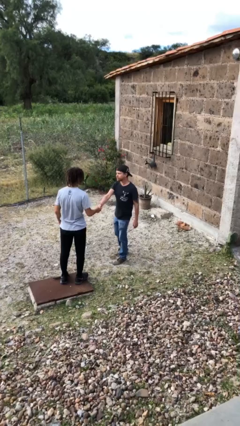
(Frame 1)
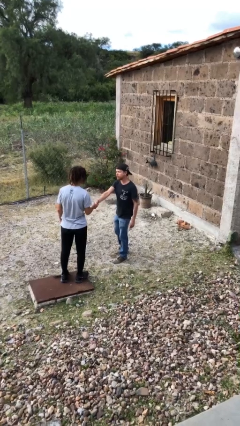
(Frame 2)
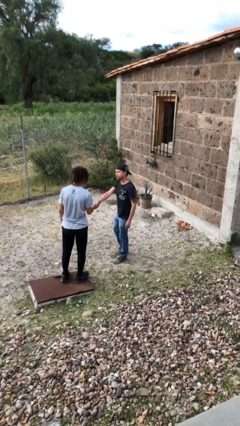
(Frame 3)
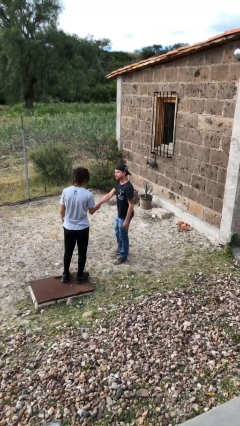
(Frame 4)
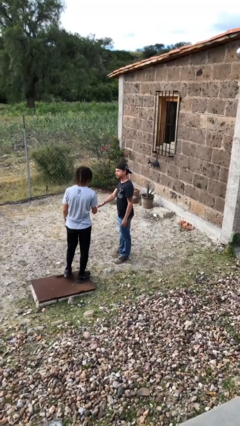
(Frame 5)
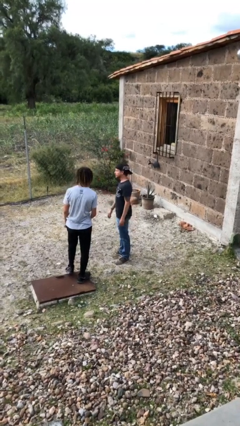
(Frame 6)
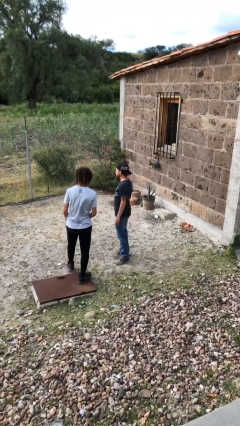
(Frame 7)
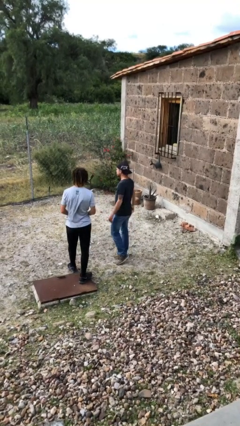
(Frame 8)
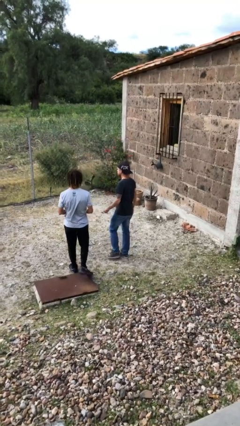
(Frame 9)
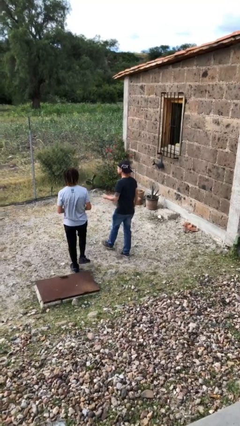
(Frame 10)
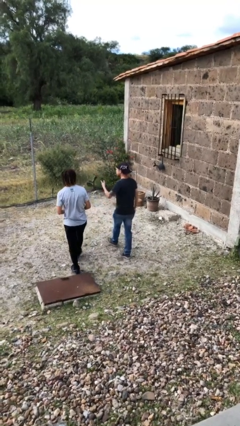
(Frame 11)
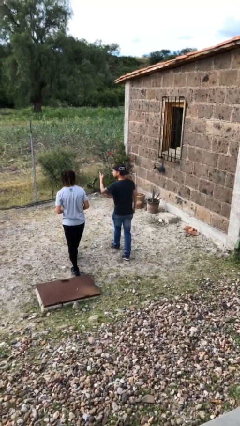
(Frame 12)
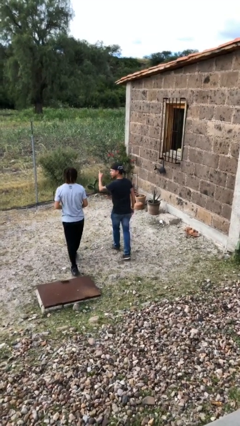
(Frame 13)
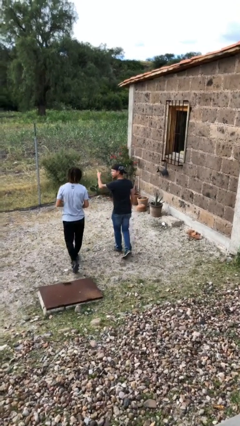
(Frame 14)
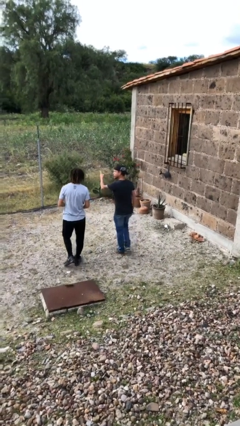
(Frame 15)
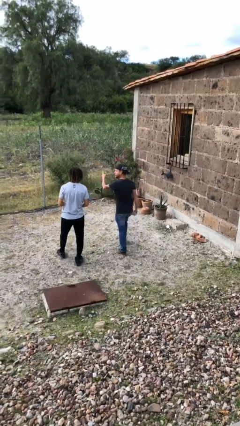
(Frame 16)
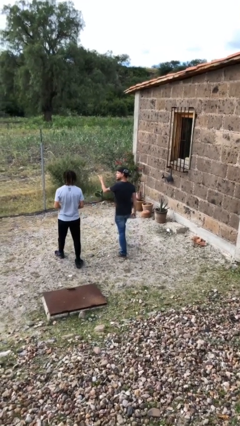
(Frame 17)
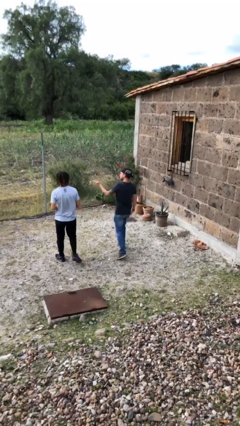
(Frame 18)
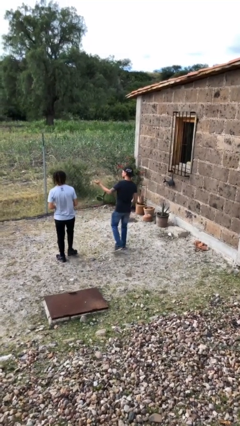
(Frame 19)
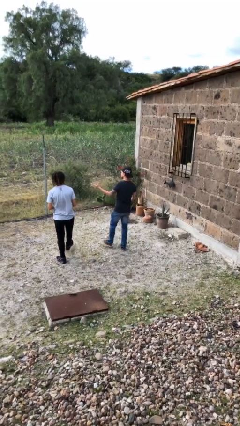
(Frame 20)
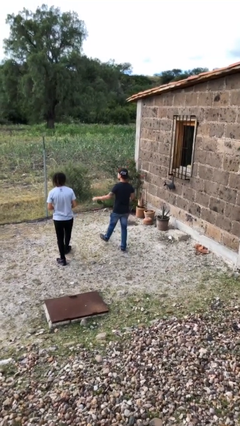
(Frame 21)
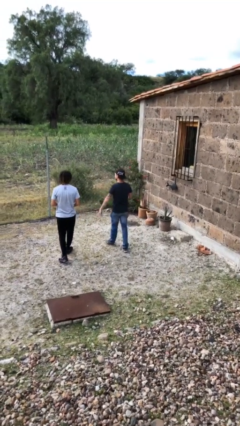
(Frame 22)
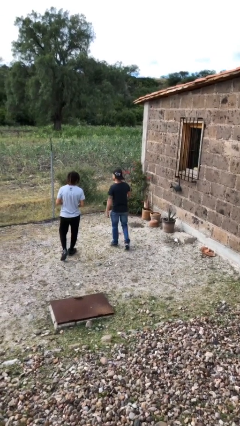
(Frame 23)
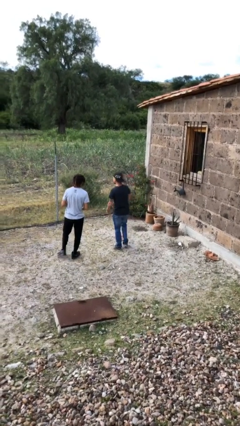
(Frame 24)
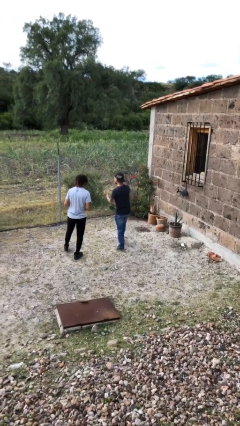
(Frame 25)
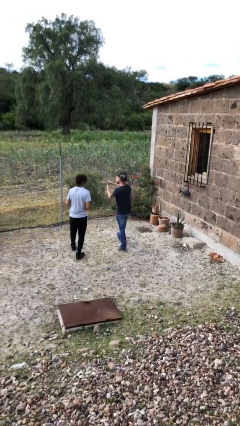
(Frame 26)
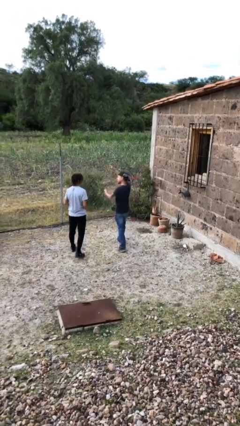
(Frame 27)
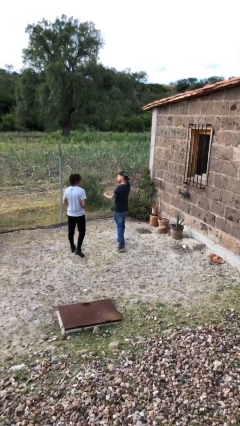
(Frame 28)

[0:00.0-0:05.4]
person talks to person

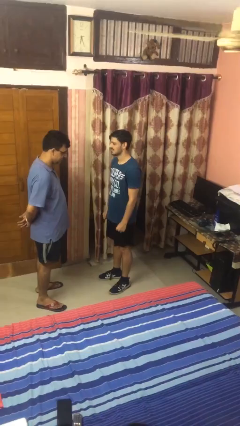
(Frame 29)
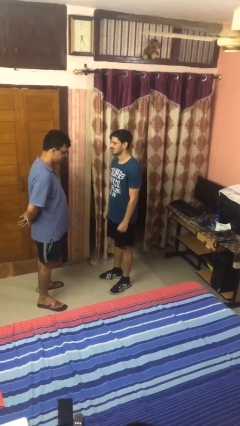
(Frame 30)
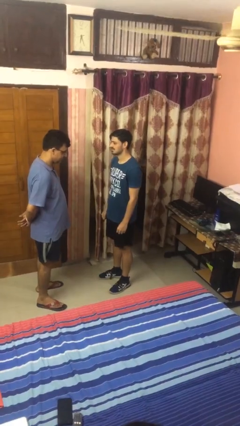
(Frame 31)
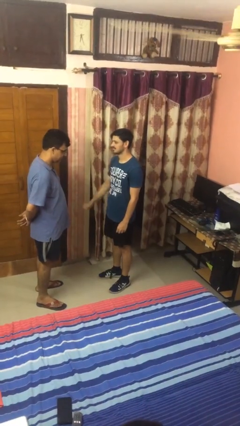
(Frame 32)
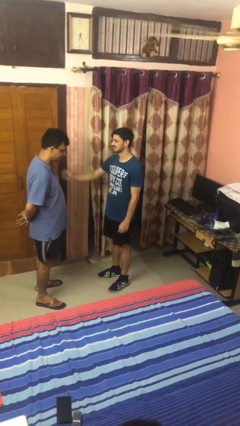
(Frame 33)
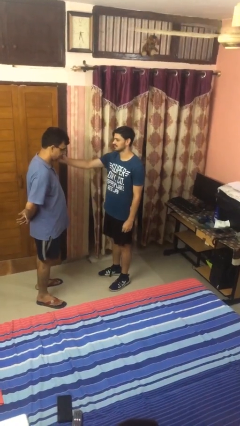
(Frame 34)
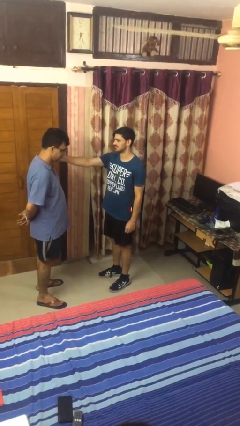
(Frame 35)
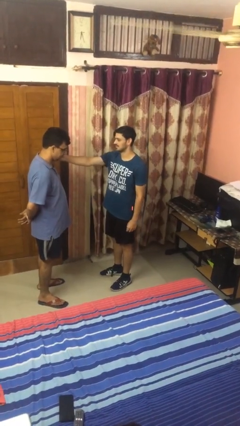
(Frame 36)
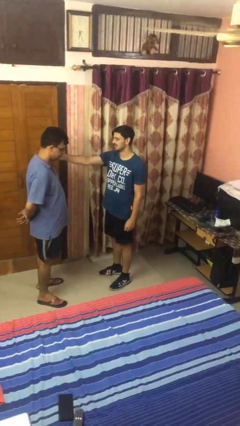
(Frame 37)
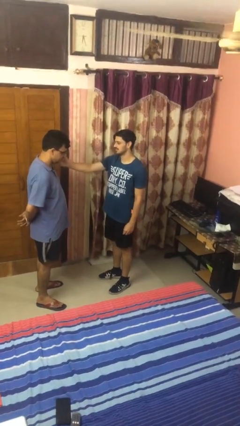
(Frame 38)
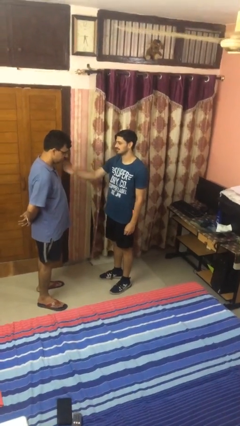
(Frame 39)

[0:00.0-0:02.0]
person touches face of person

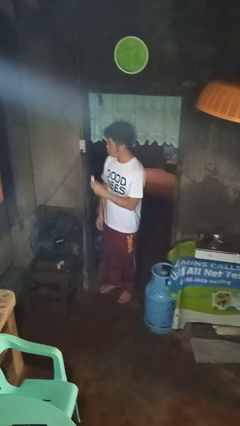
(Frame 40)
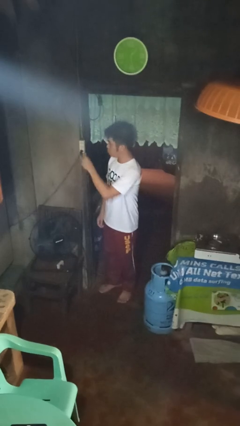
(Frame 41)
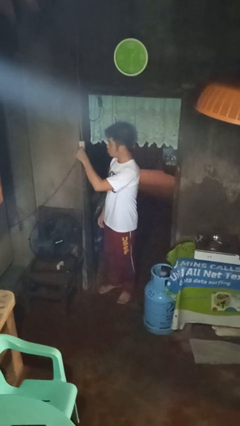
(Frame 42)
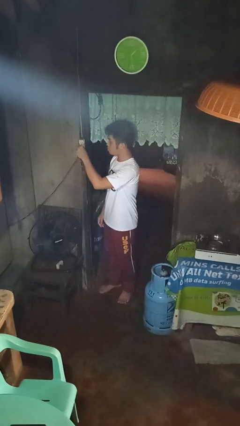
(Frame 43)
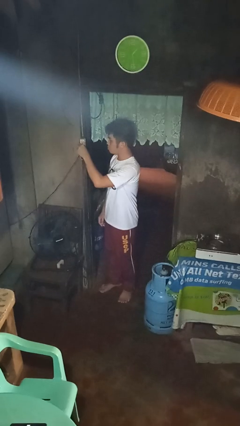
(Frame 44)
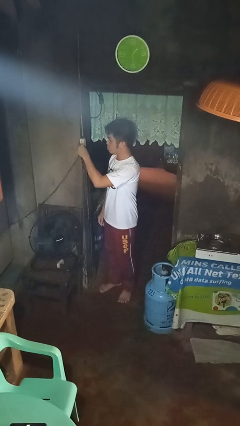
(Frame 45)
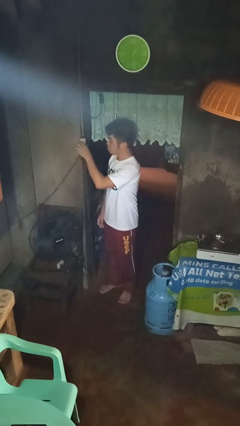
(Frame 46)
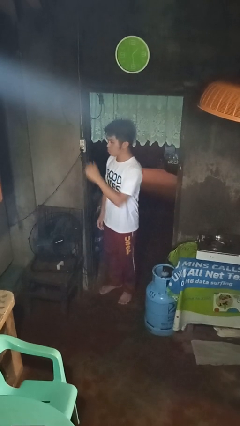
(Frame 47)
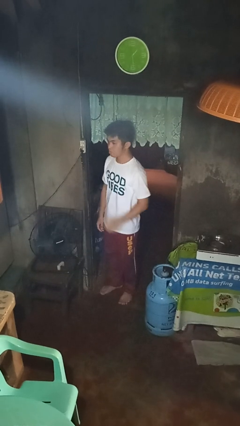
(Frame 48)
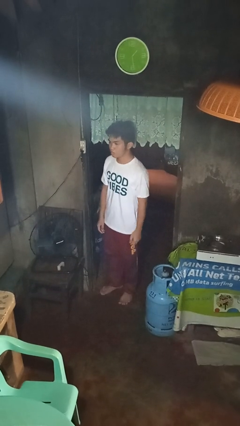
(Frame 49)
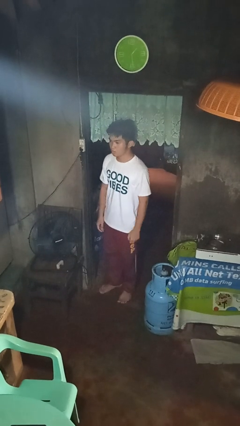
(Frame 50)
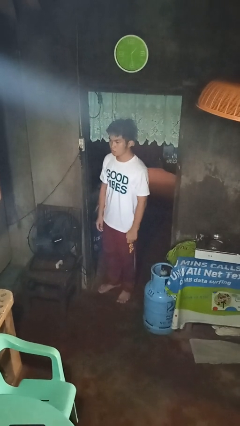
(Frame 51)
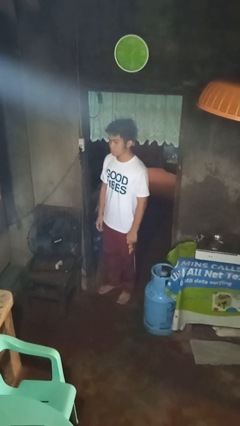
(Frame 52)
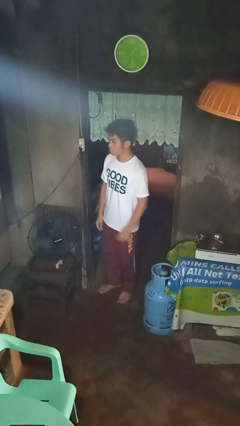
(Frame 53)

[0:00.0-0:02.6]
person plugs into electrical socket

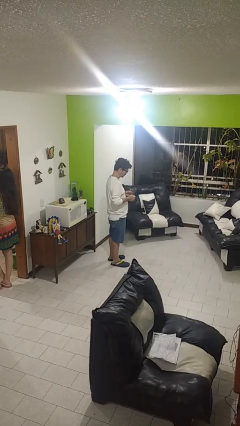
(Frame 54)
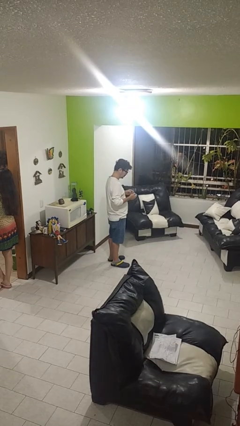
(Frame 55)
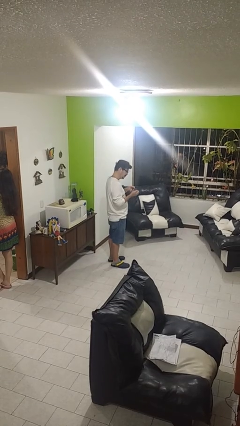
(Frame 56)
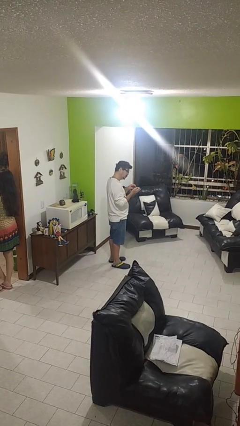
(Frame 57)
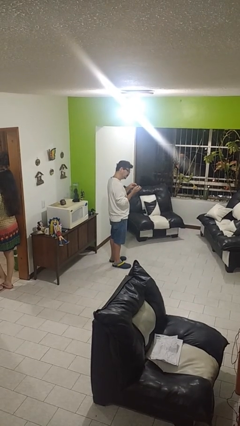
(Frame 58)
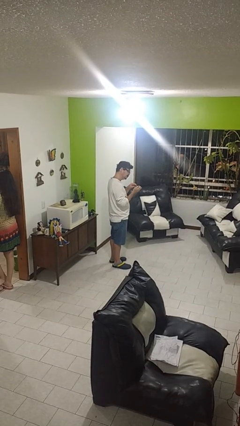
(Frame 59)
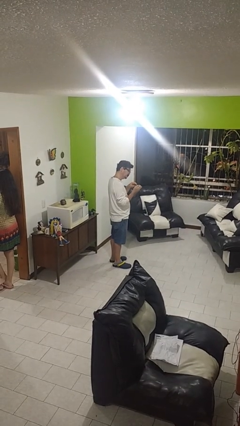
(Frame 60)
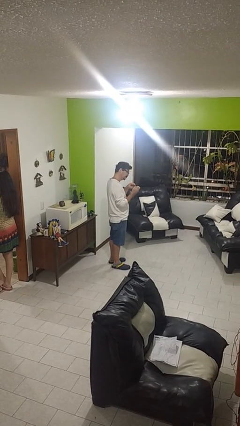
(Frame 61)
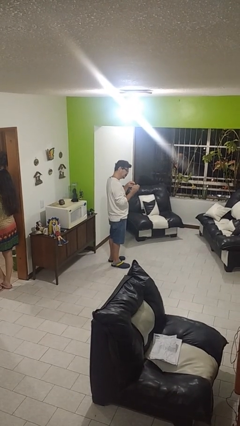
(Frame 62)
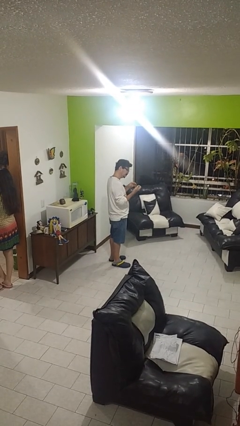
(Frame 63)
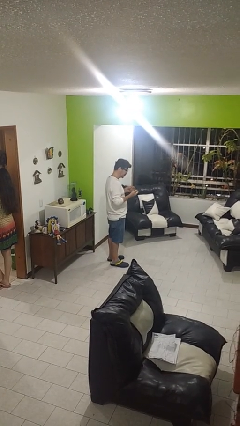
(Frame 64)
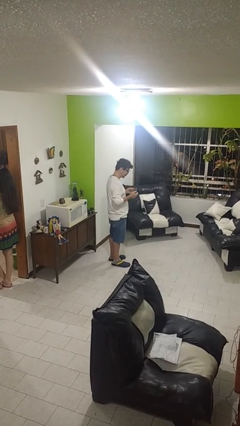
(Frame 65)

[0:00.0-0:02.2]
person clips fingernails

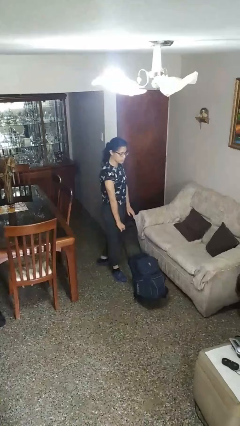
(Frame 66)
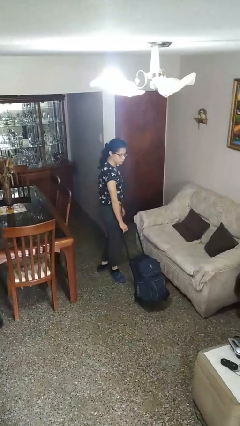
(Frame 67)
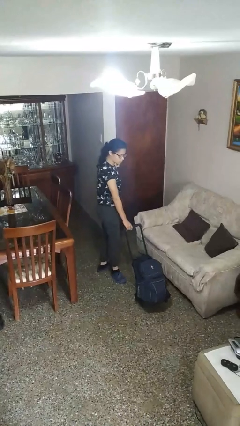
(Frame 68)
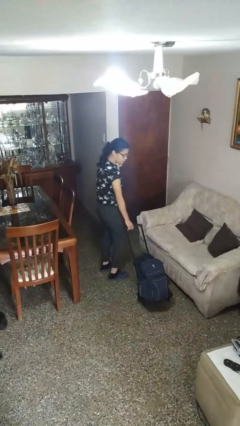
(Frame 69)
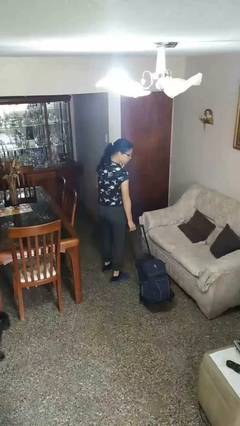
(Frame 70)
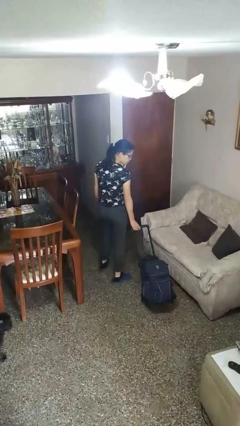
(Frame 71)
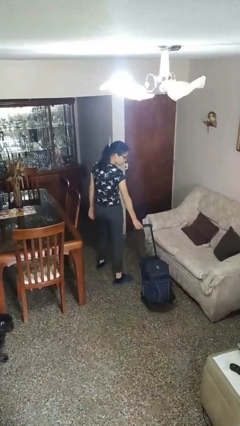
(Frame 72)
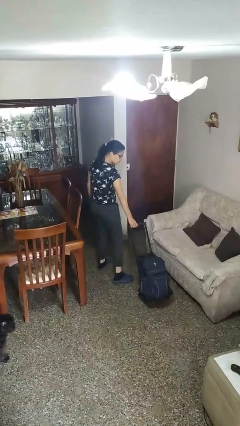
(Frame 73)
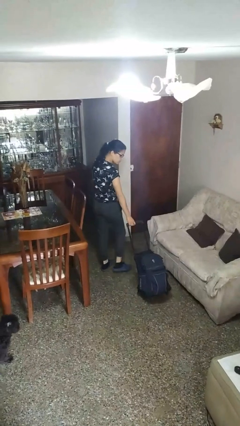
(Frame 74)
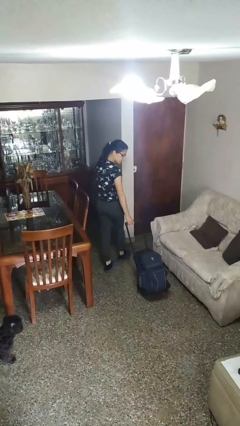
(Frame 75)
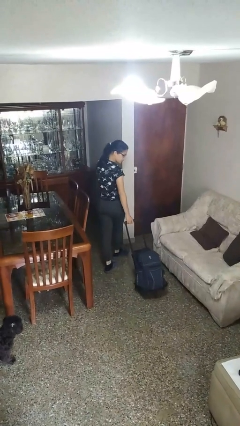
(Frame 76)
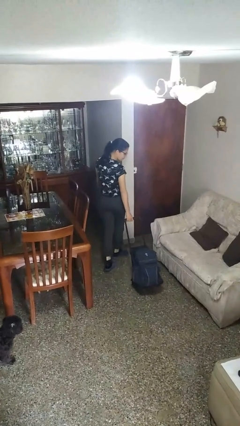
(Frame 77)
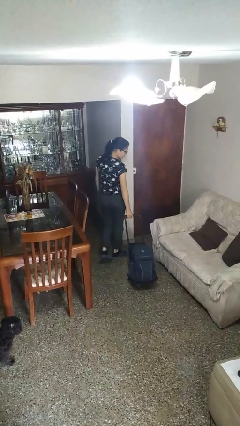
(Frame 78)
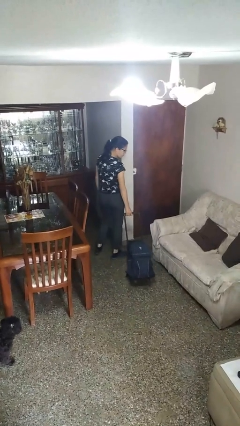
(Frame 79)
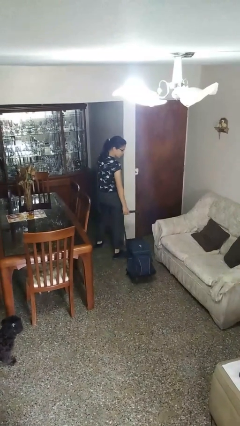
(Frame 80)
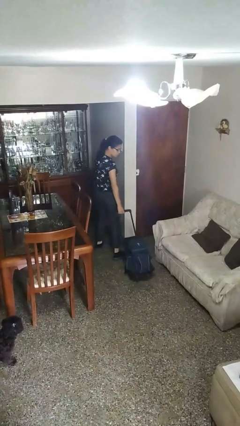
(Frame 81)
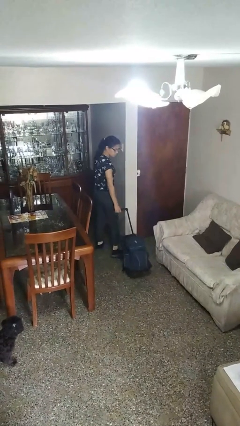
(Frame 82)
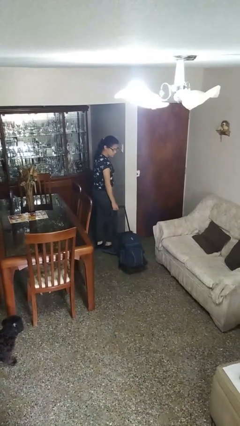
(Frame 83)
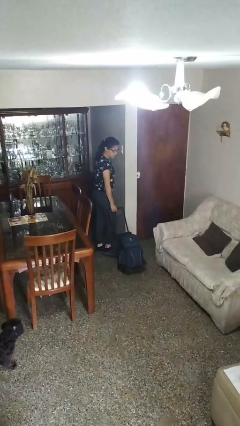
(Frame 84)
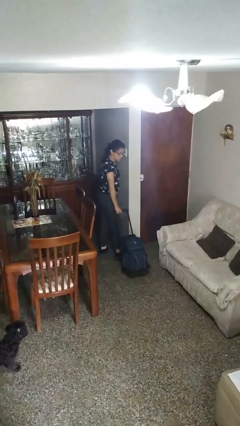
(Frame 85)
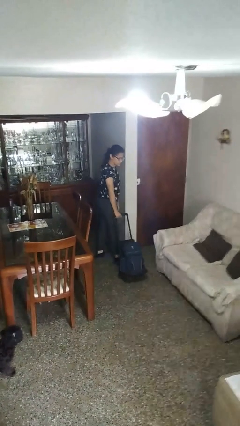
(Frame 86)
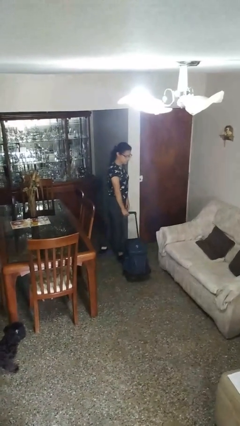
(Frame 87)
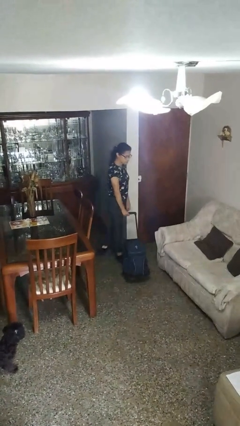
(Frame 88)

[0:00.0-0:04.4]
person pulls wheeled cart

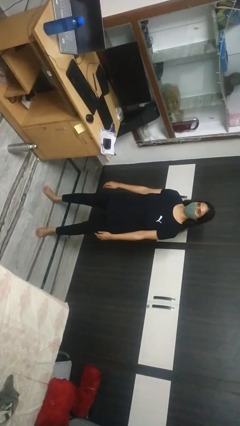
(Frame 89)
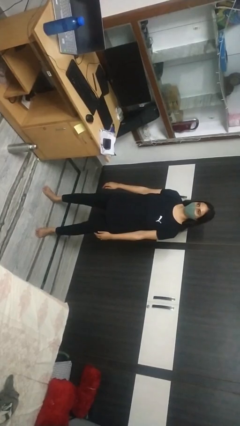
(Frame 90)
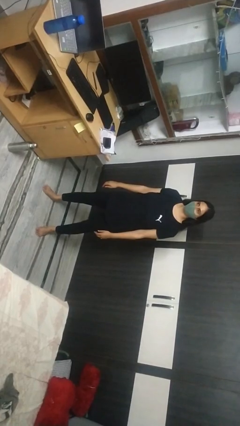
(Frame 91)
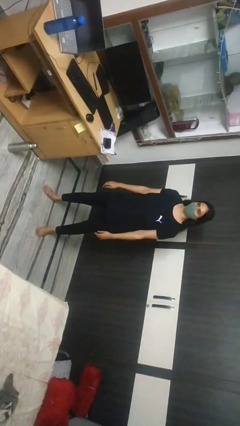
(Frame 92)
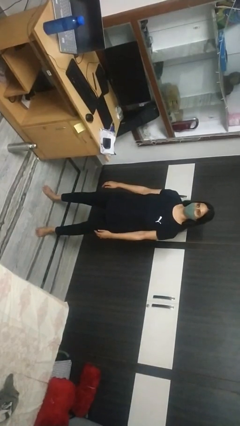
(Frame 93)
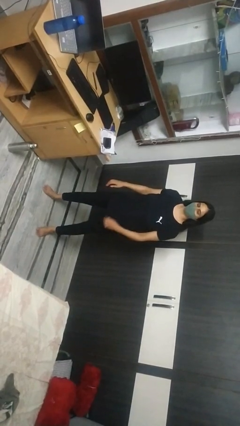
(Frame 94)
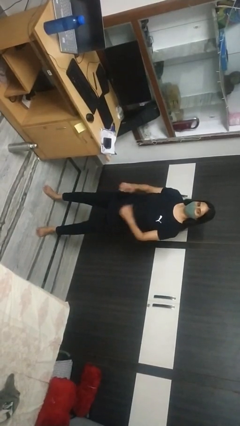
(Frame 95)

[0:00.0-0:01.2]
person squats
